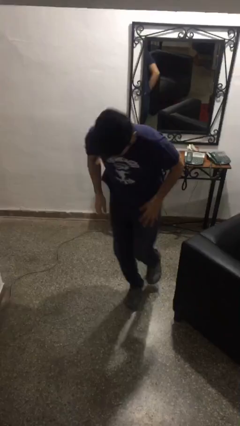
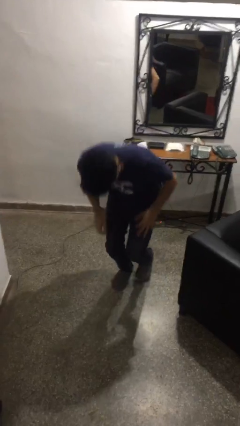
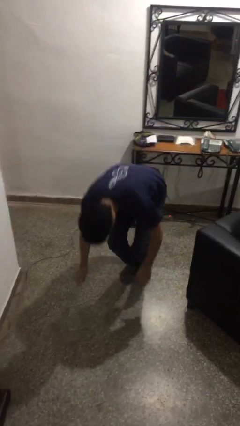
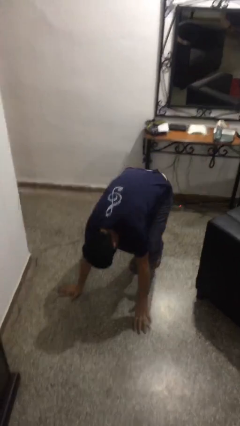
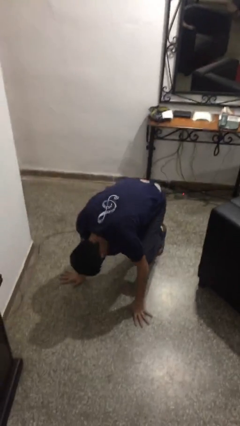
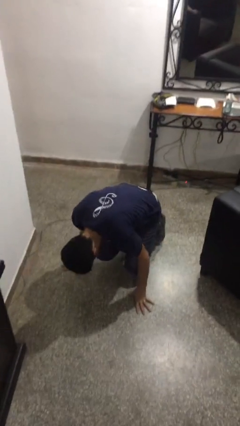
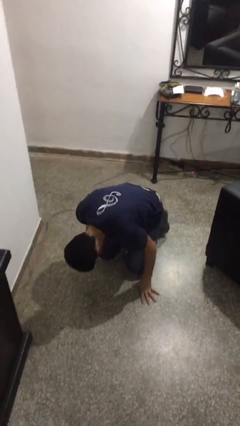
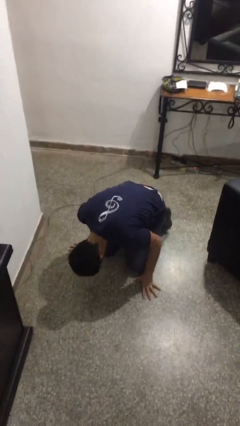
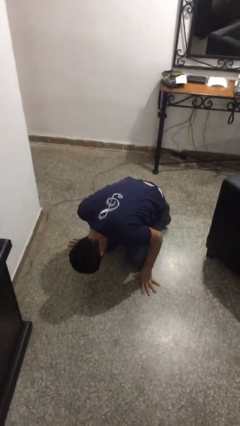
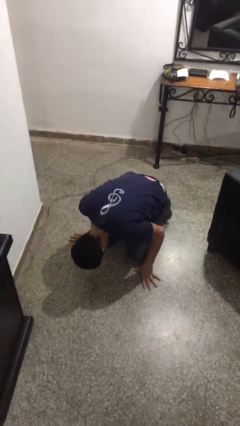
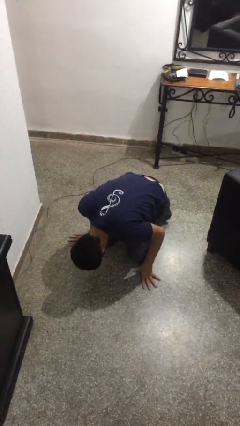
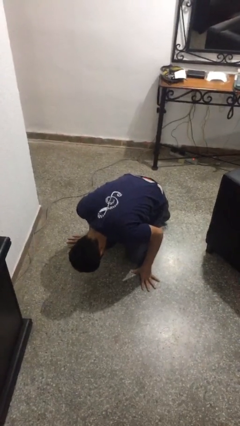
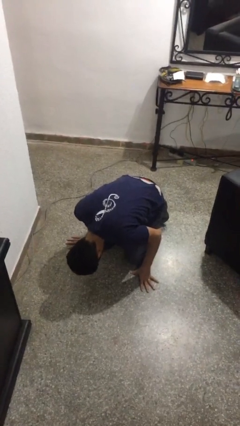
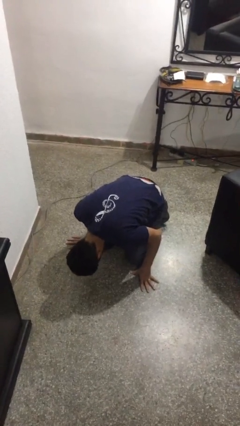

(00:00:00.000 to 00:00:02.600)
person lies down on floor

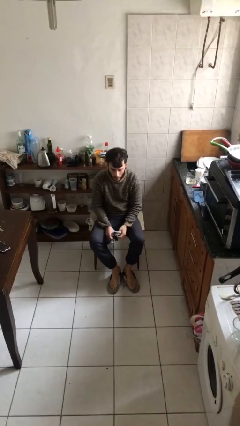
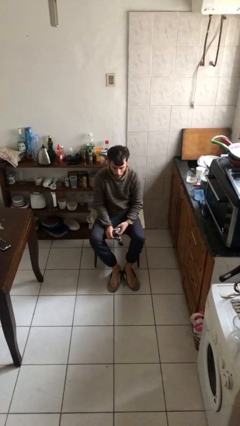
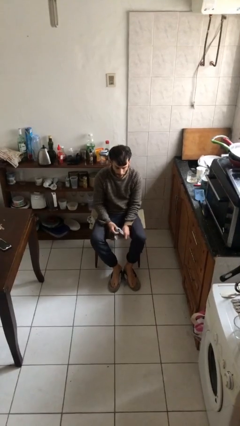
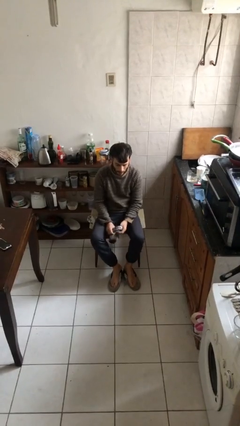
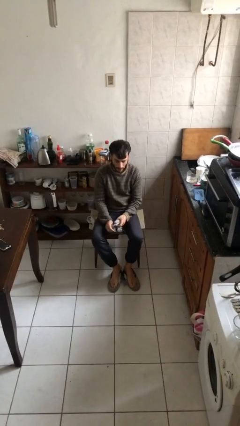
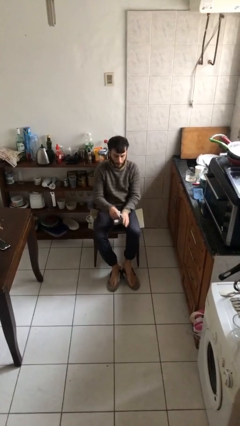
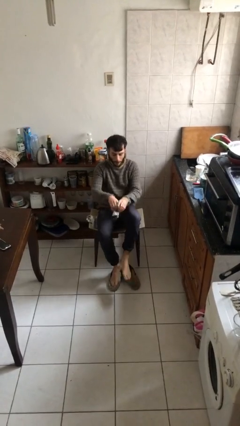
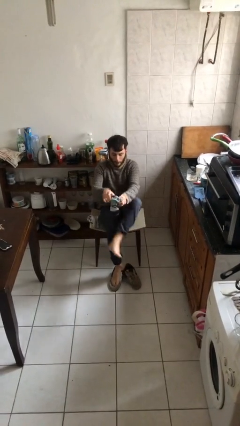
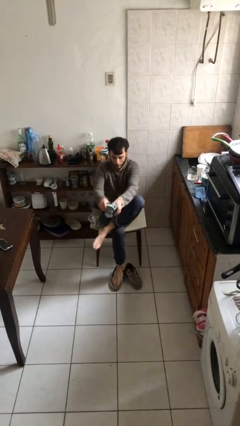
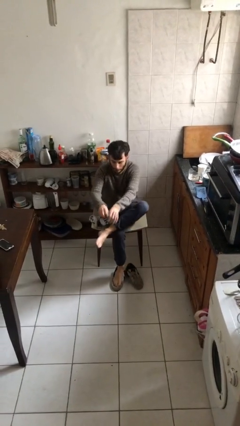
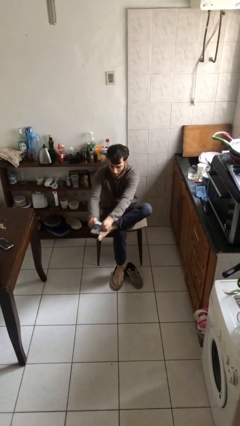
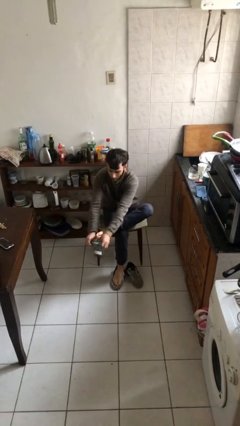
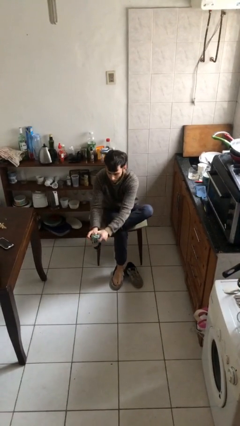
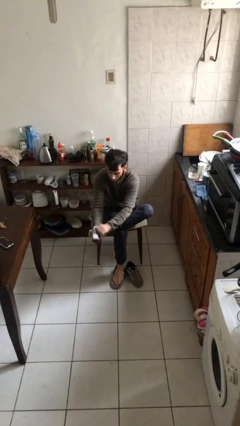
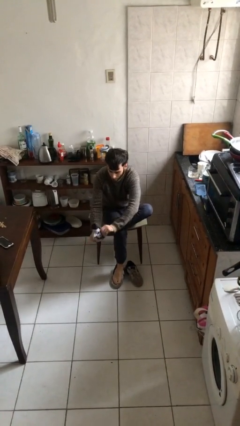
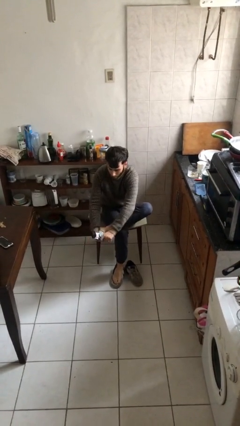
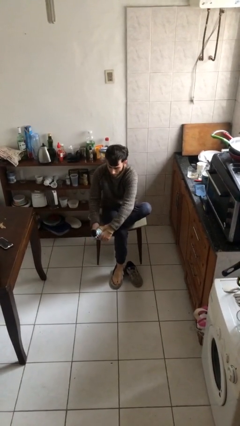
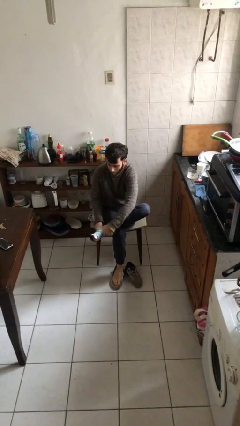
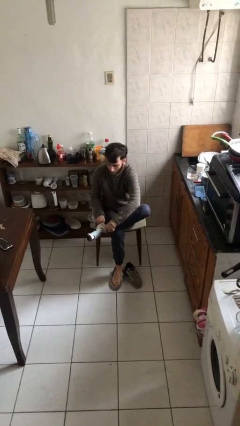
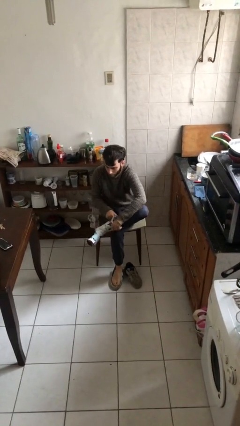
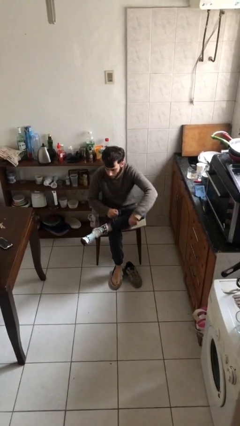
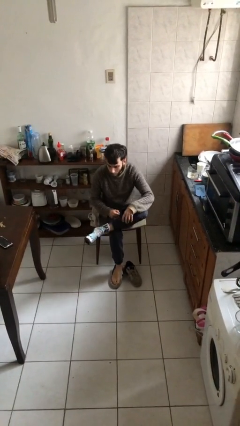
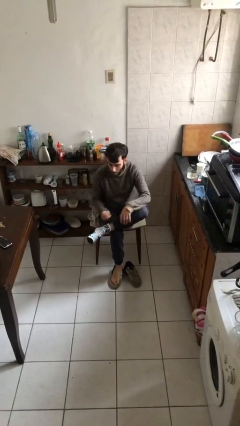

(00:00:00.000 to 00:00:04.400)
person puts on socks

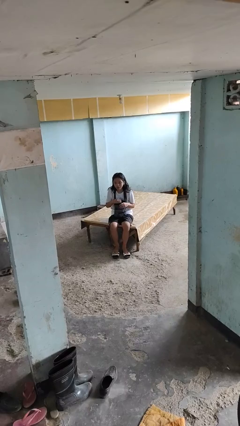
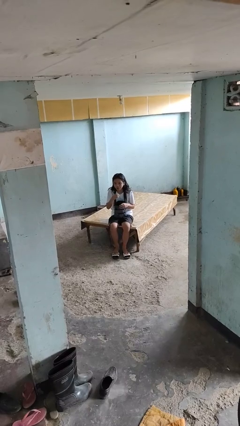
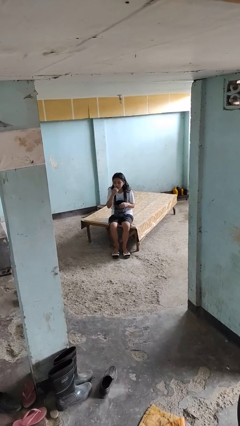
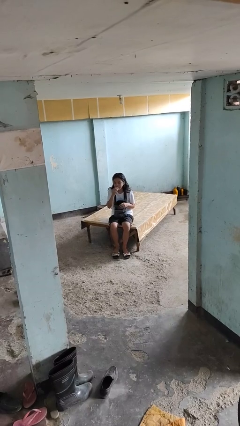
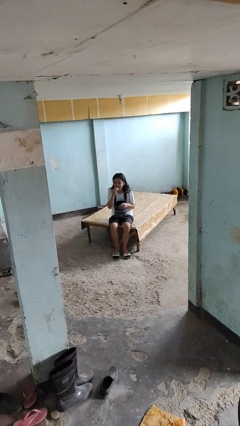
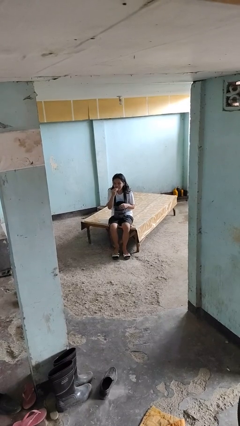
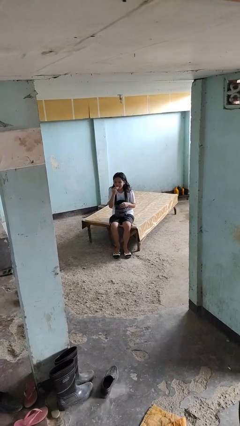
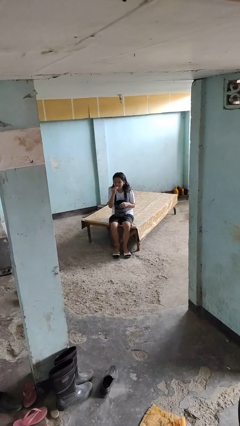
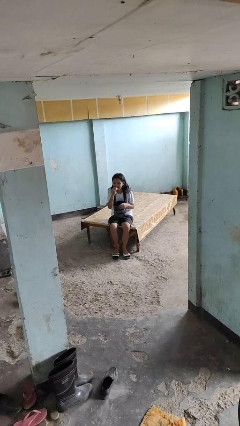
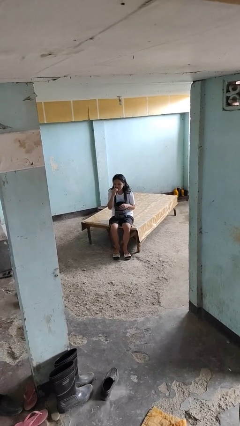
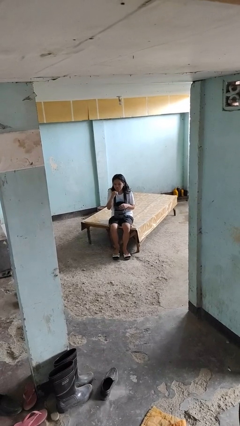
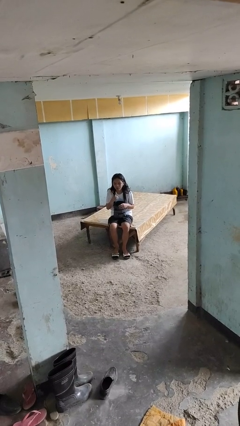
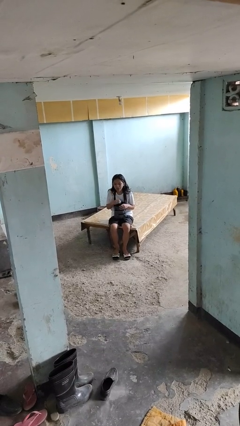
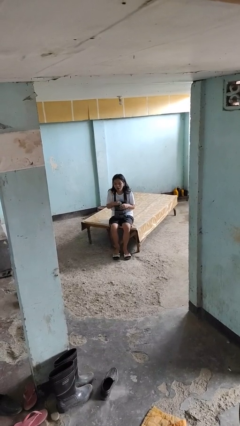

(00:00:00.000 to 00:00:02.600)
person eats snack from bag

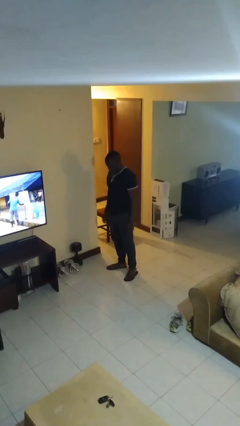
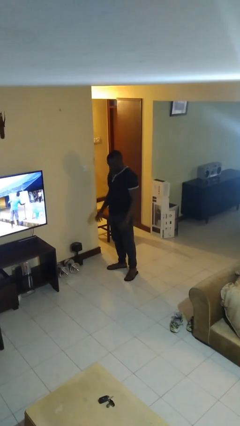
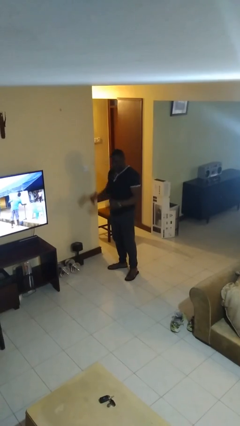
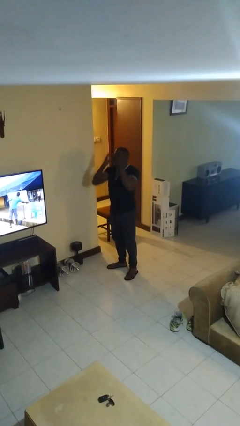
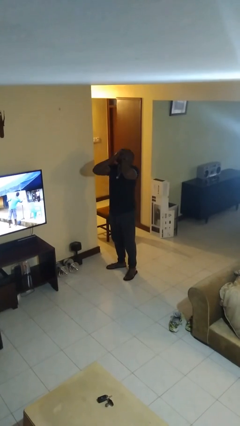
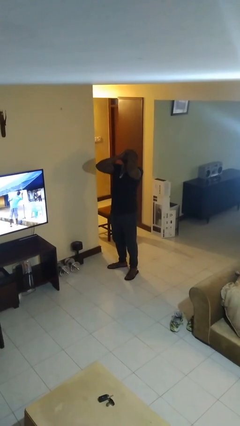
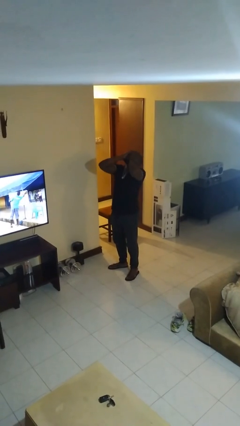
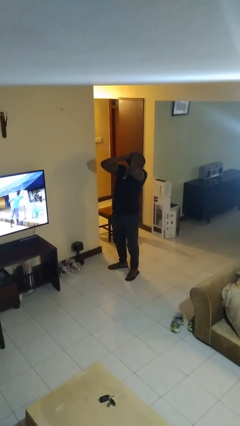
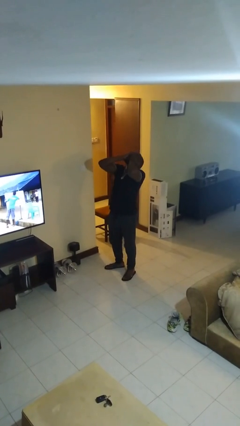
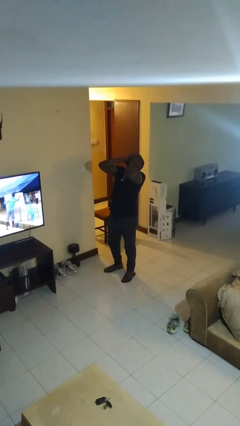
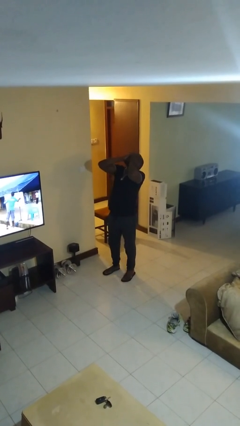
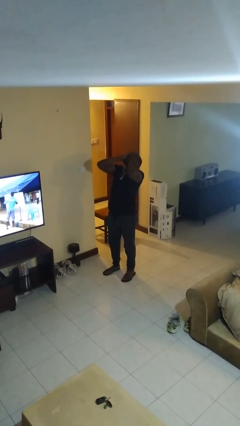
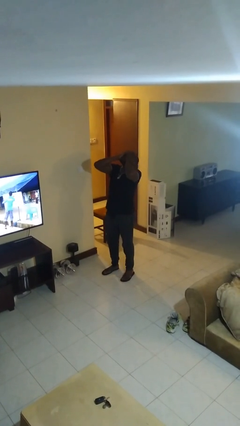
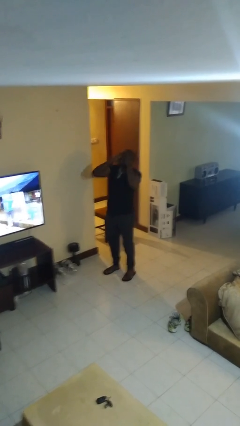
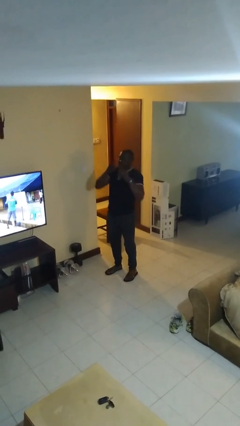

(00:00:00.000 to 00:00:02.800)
person covers face with hands

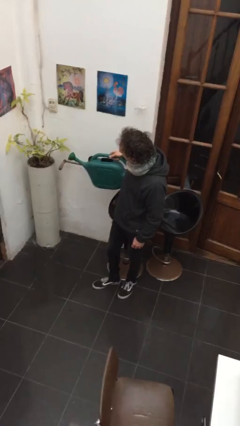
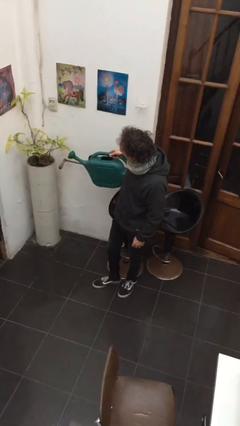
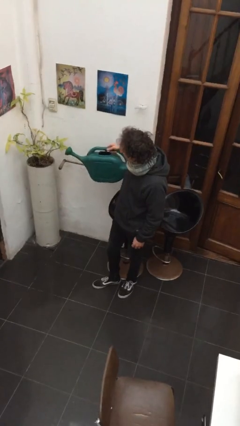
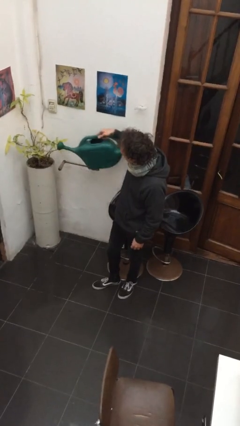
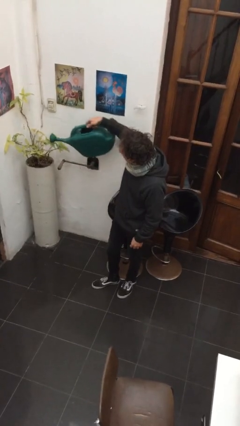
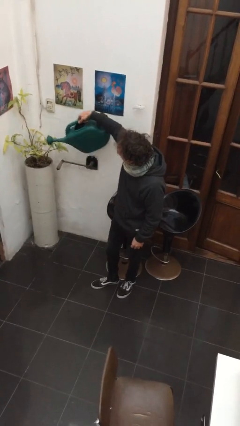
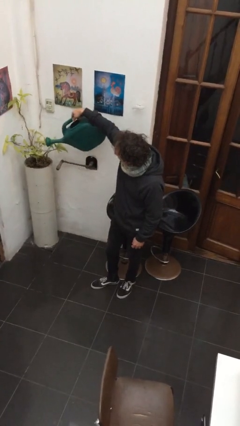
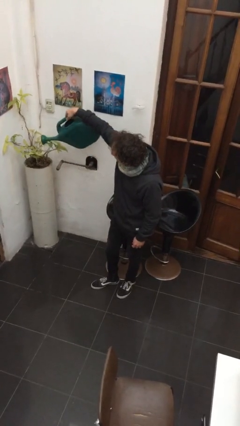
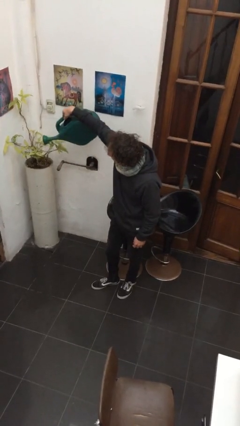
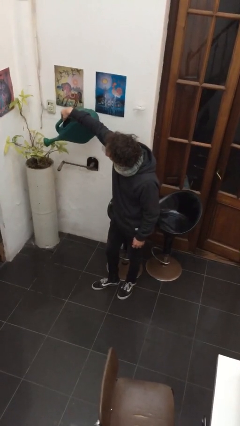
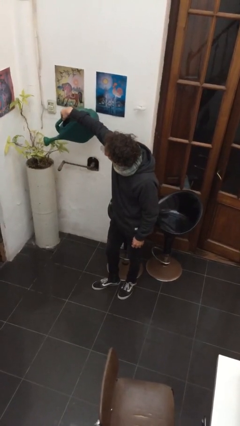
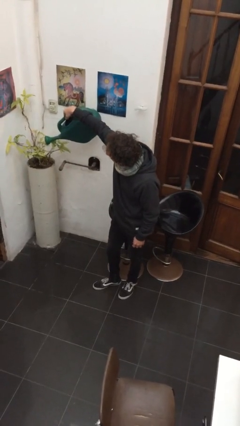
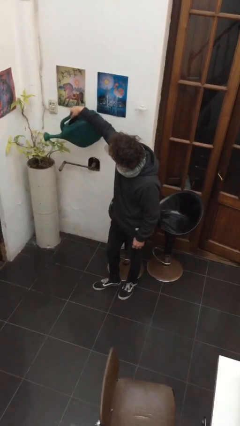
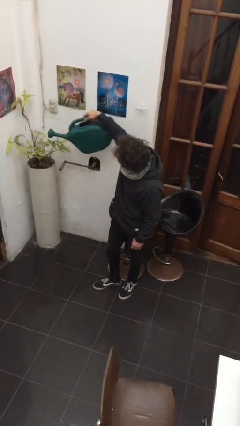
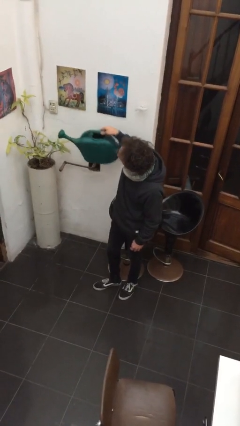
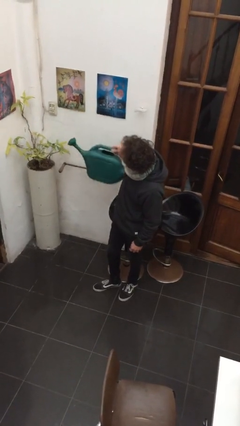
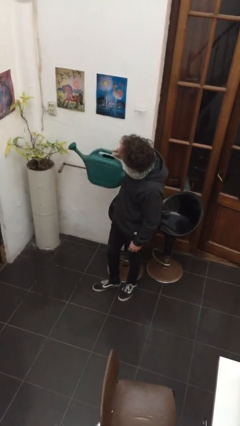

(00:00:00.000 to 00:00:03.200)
person waters houseplant

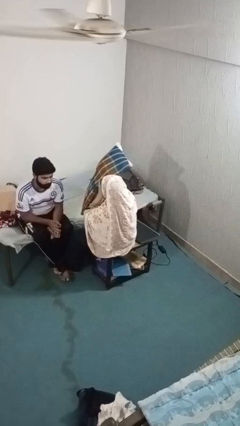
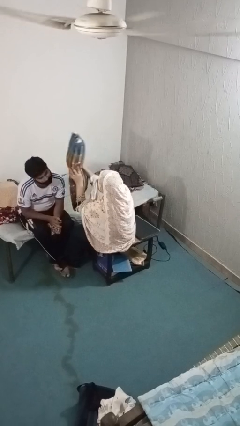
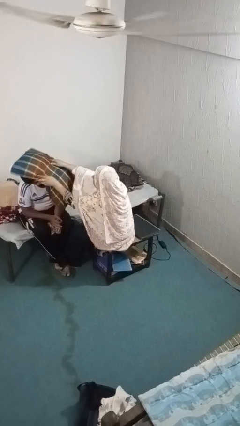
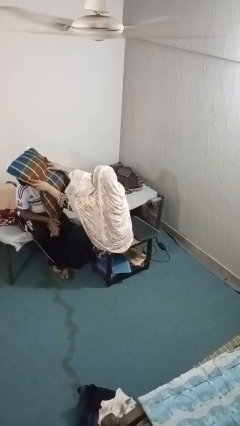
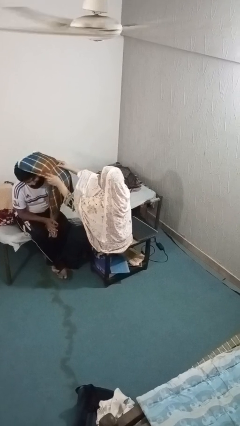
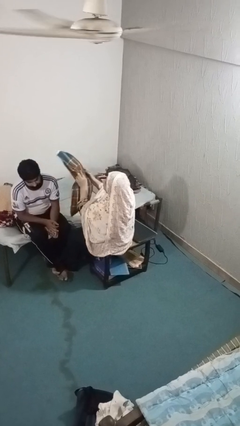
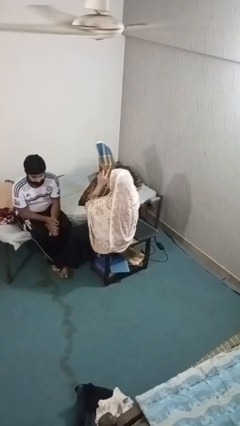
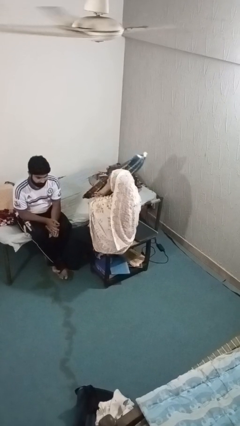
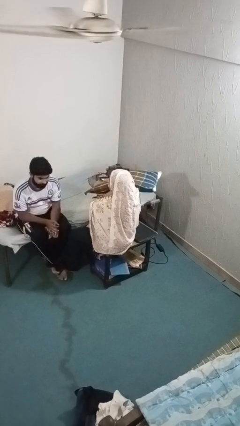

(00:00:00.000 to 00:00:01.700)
person hits person with pillow
